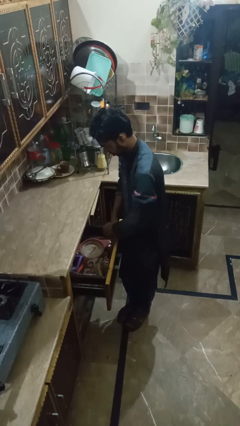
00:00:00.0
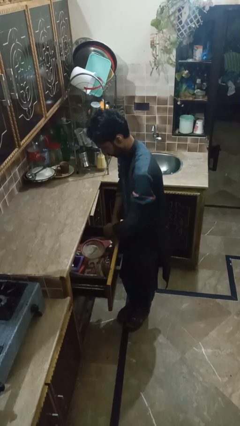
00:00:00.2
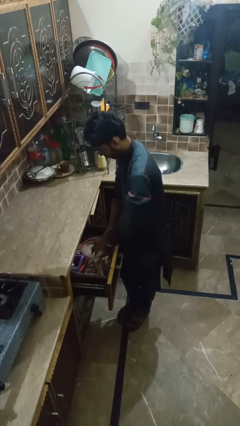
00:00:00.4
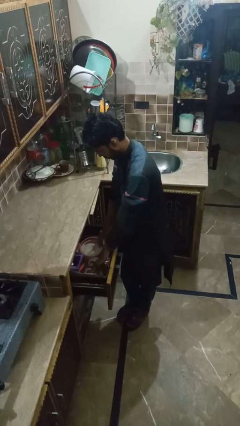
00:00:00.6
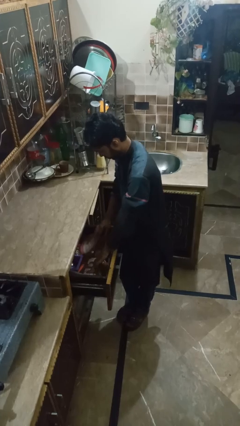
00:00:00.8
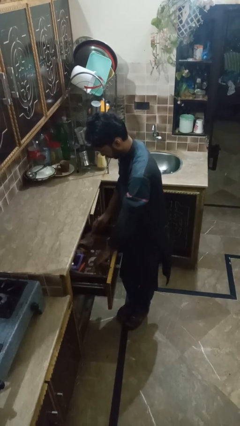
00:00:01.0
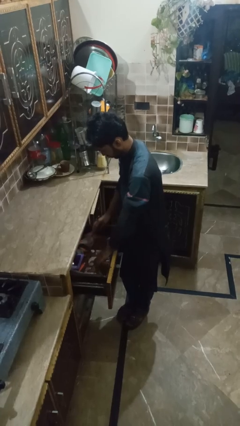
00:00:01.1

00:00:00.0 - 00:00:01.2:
person searches in kitchen drawer

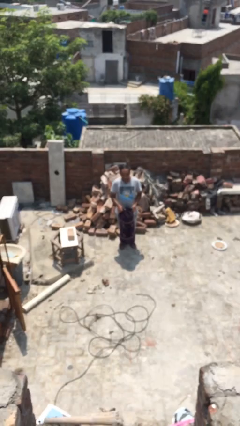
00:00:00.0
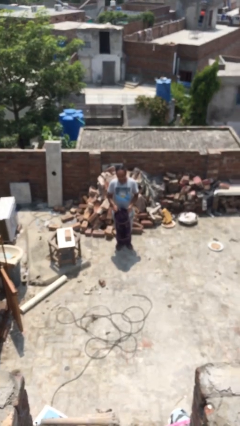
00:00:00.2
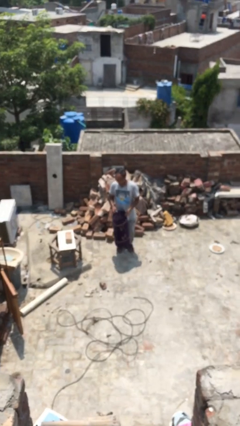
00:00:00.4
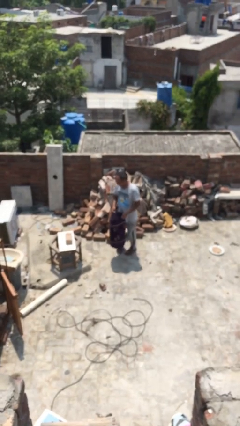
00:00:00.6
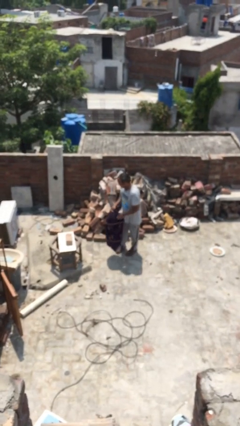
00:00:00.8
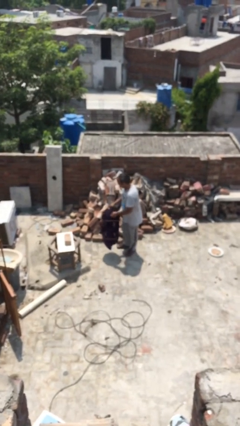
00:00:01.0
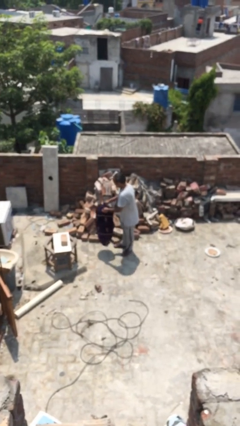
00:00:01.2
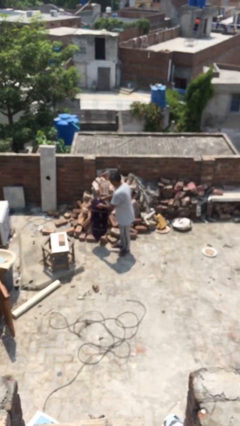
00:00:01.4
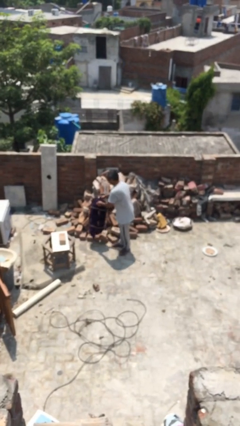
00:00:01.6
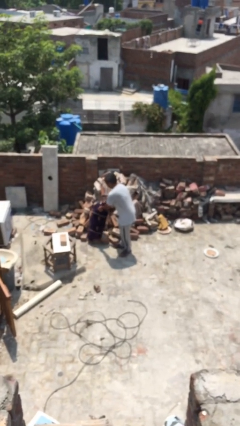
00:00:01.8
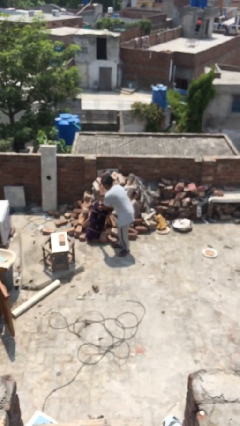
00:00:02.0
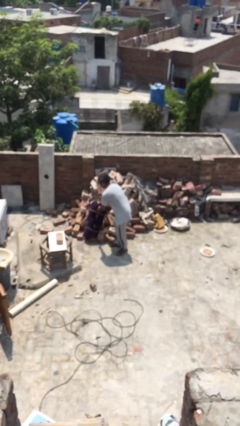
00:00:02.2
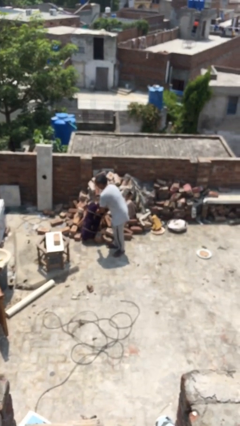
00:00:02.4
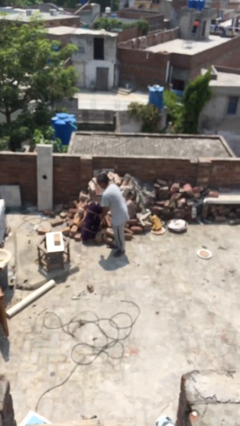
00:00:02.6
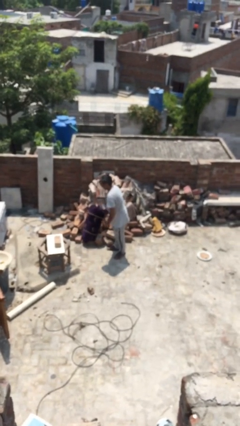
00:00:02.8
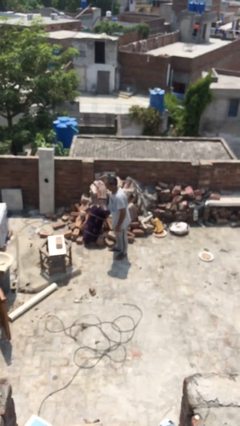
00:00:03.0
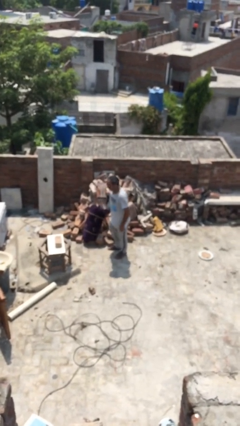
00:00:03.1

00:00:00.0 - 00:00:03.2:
person puts down object on floor

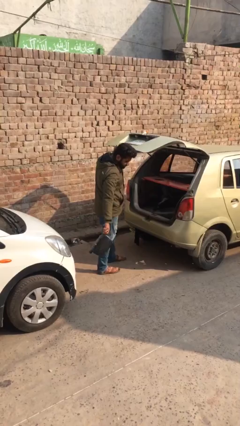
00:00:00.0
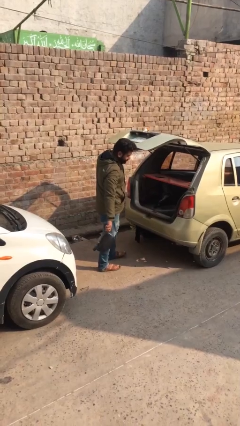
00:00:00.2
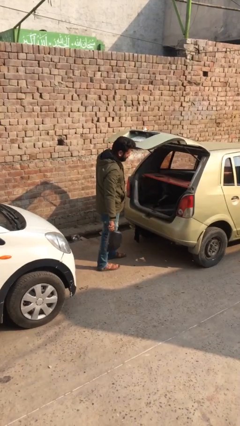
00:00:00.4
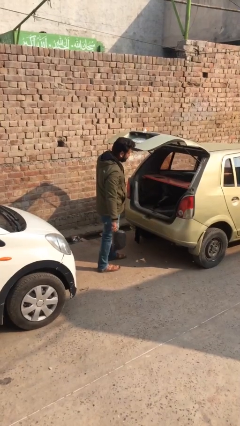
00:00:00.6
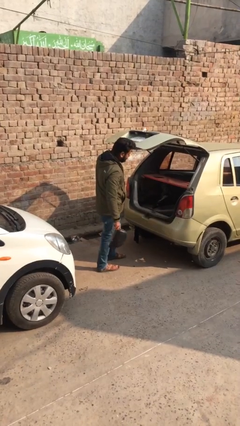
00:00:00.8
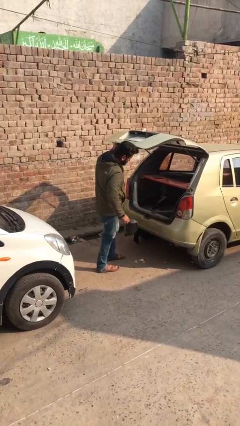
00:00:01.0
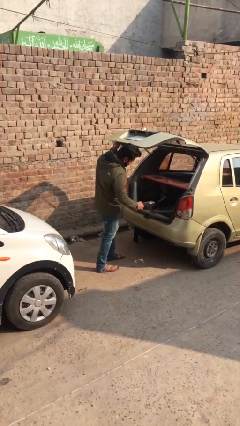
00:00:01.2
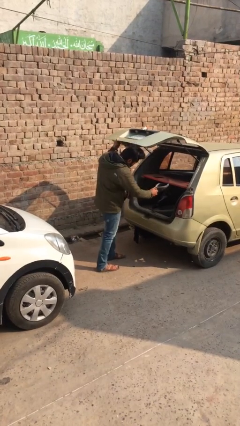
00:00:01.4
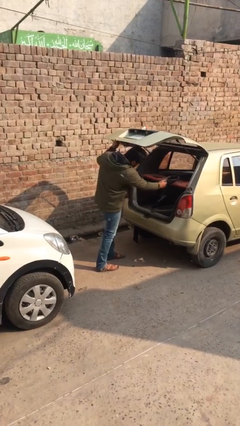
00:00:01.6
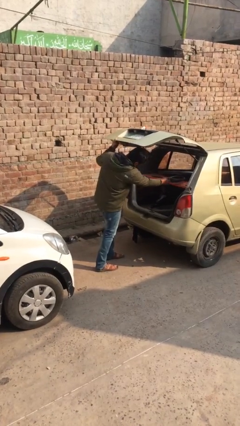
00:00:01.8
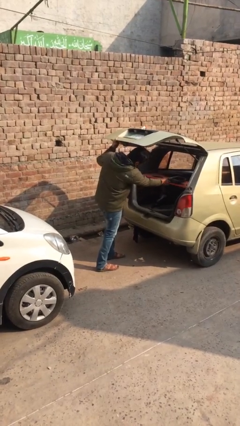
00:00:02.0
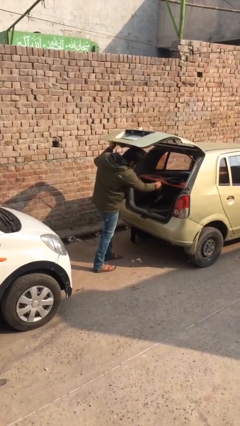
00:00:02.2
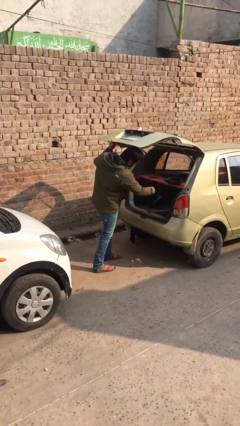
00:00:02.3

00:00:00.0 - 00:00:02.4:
person loads car

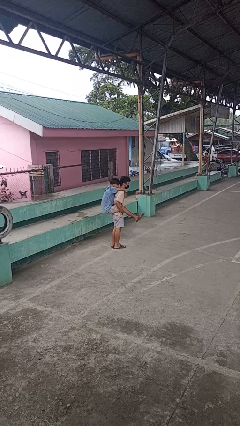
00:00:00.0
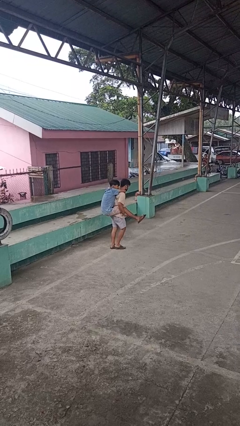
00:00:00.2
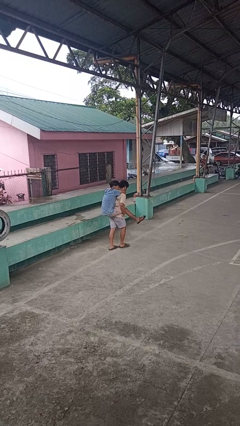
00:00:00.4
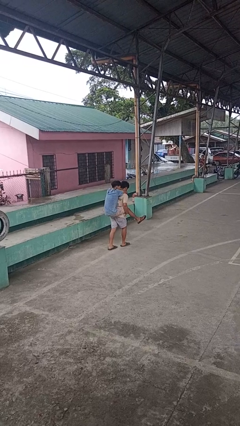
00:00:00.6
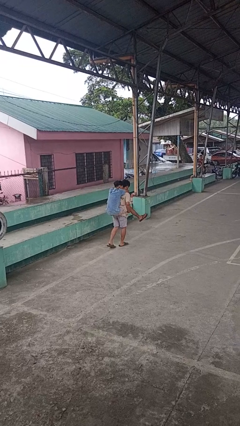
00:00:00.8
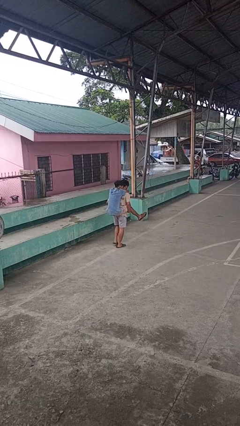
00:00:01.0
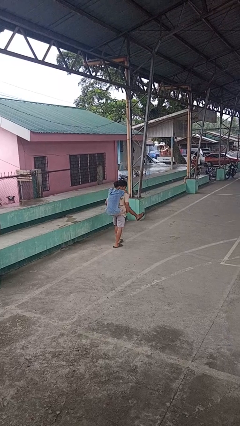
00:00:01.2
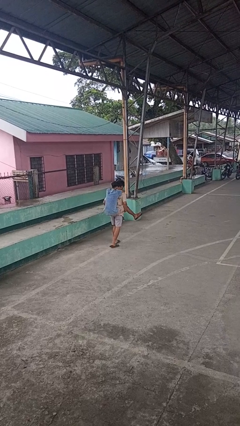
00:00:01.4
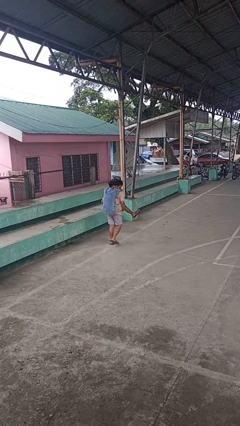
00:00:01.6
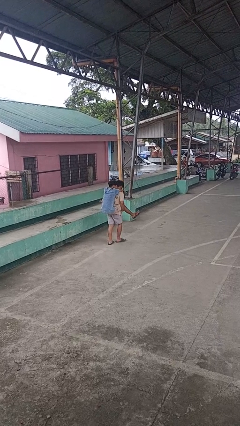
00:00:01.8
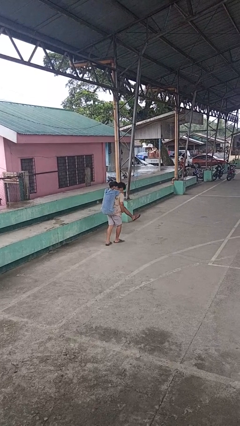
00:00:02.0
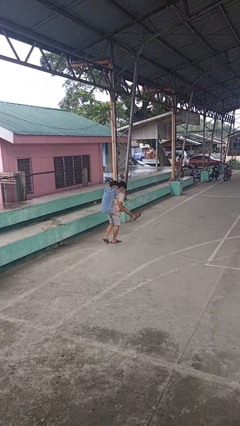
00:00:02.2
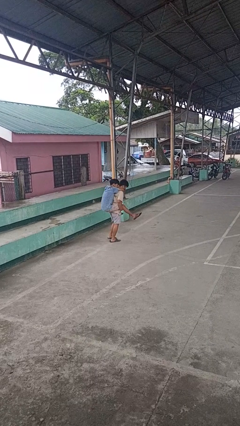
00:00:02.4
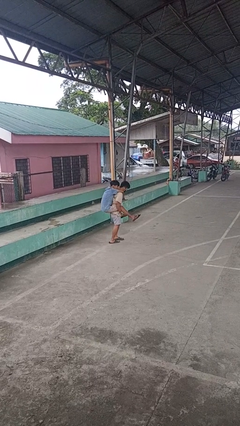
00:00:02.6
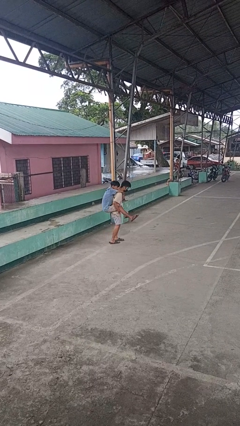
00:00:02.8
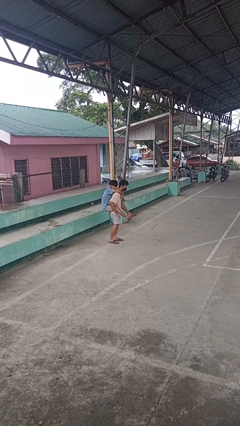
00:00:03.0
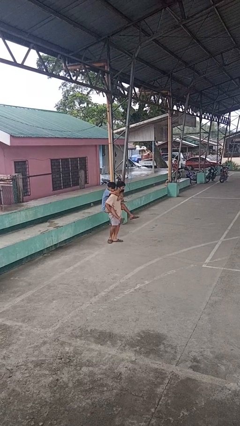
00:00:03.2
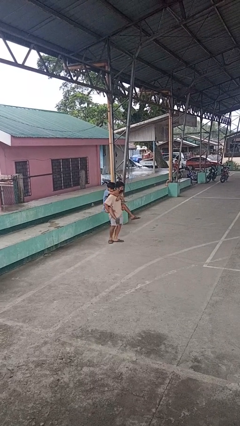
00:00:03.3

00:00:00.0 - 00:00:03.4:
person carries person on back

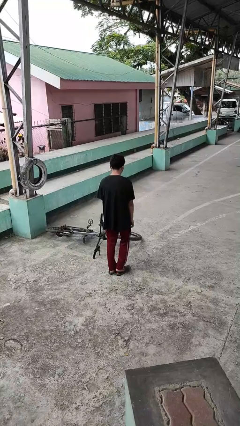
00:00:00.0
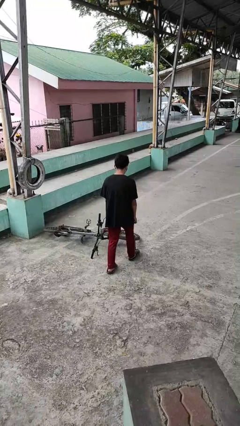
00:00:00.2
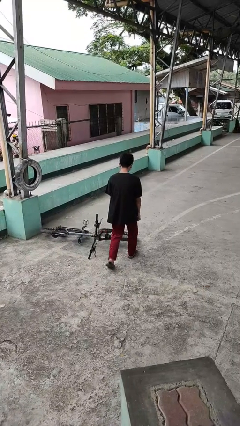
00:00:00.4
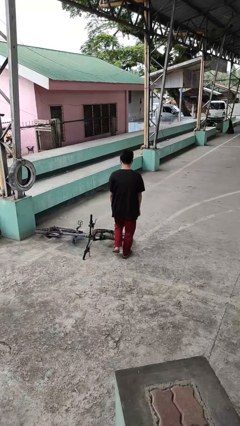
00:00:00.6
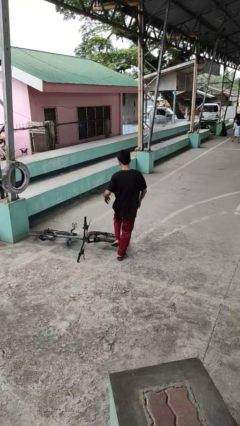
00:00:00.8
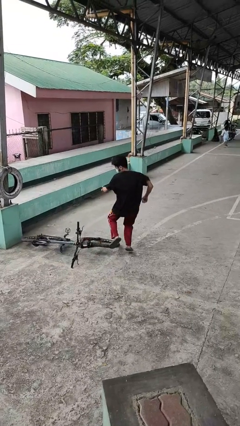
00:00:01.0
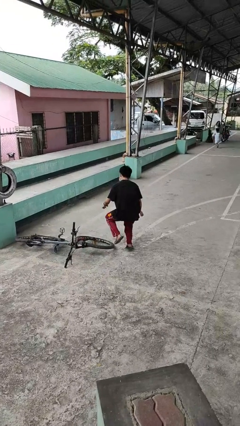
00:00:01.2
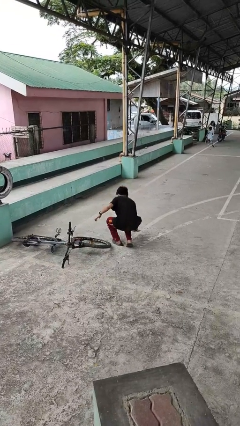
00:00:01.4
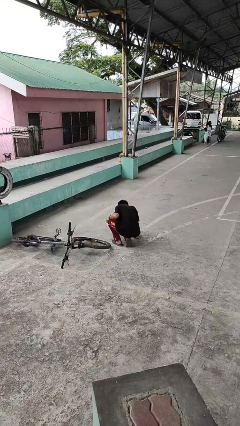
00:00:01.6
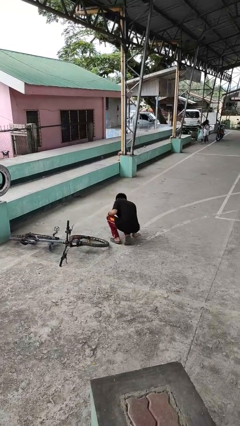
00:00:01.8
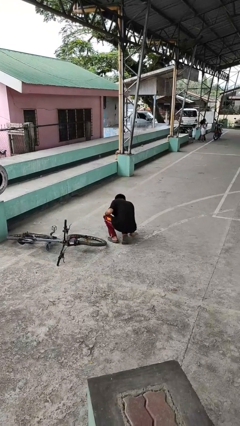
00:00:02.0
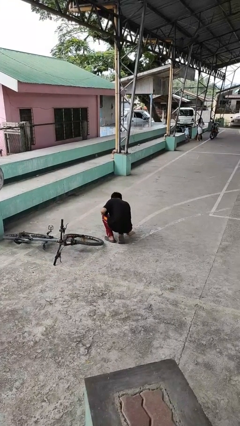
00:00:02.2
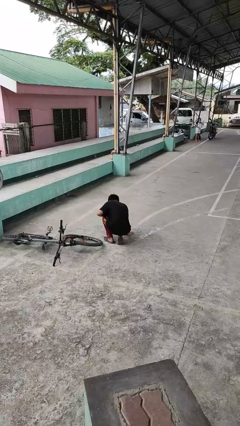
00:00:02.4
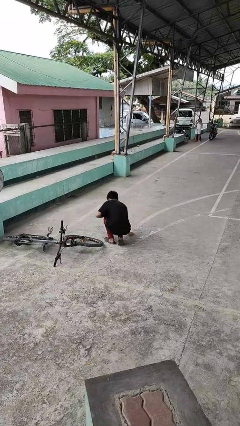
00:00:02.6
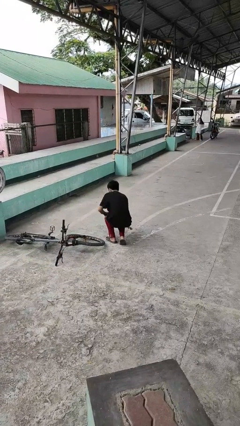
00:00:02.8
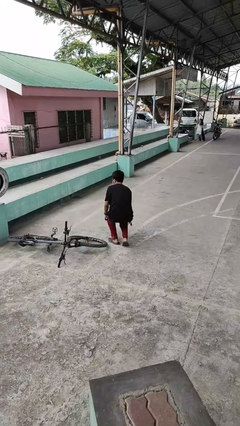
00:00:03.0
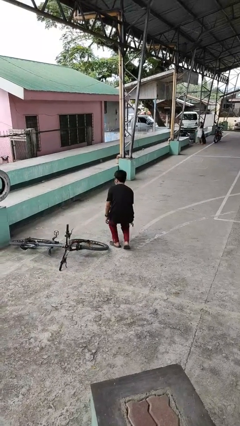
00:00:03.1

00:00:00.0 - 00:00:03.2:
person trips on object on floor

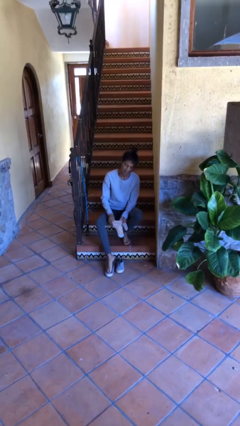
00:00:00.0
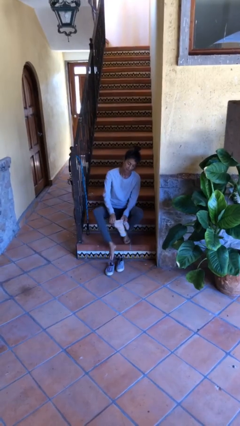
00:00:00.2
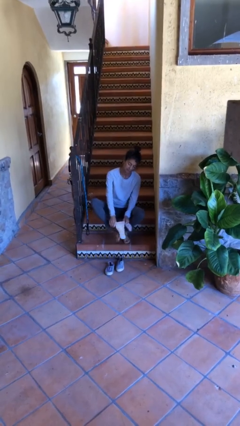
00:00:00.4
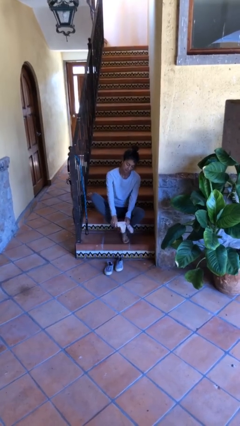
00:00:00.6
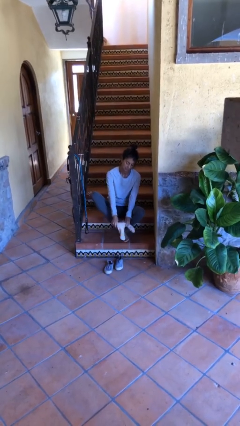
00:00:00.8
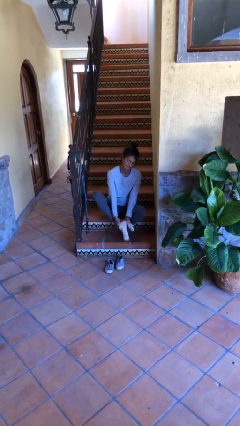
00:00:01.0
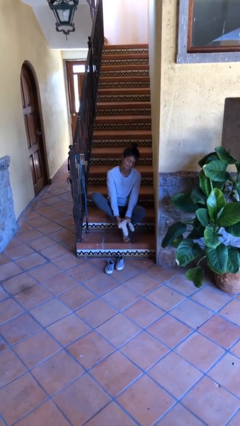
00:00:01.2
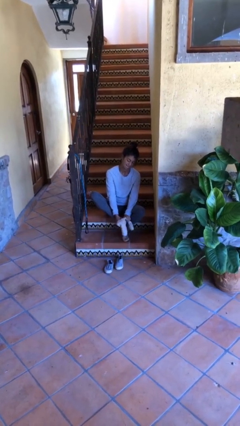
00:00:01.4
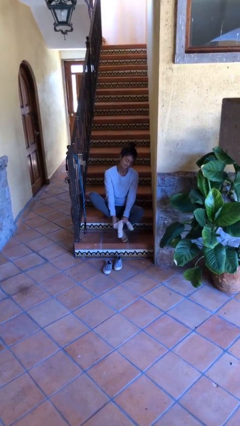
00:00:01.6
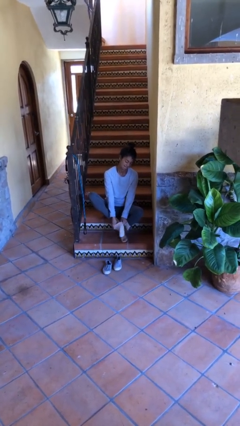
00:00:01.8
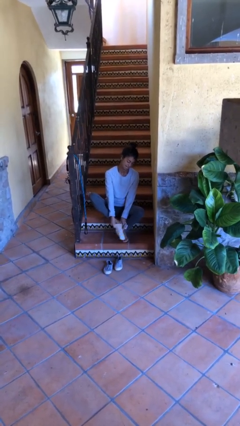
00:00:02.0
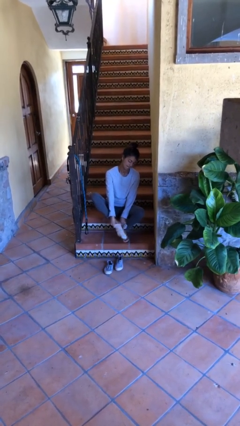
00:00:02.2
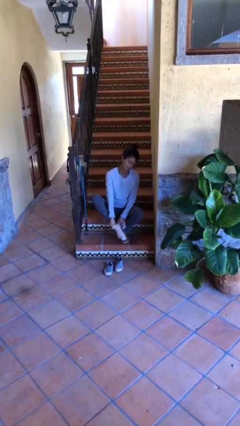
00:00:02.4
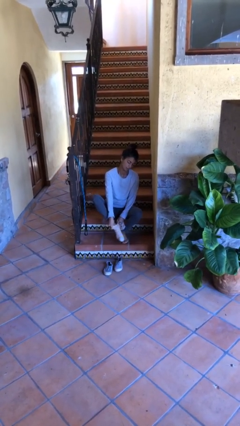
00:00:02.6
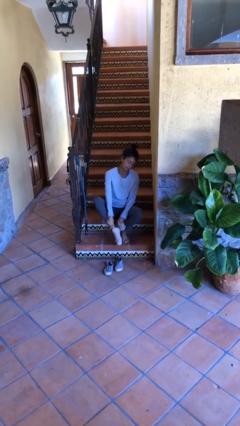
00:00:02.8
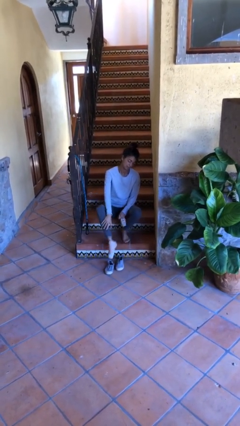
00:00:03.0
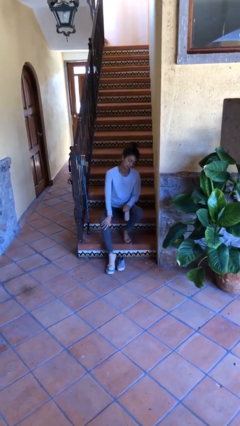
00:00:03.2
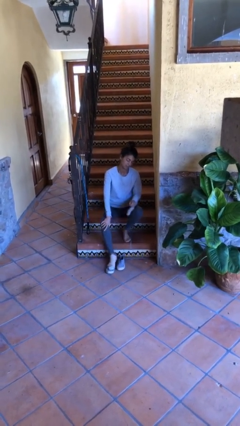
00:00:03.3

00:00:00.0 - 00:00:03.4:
person puts on socks

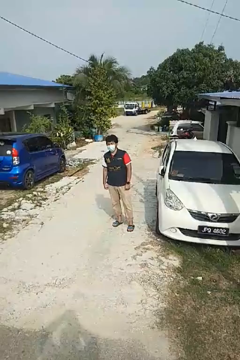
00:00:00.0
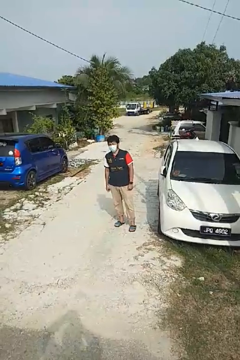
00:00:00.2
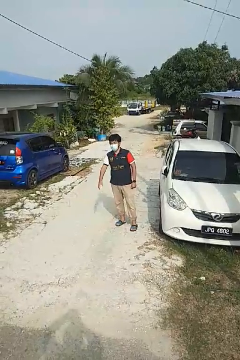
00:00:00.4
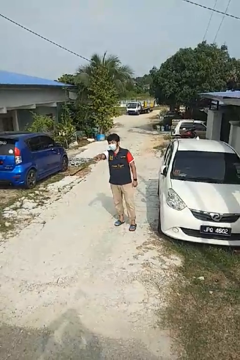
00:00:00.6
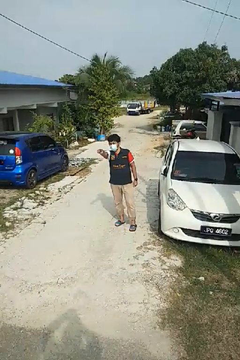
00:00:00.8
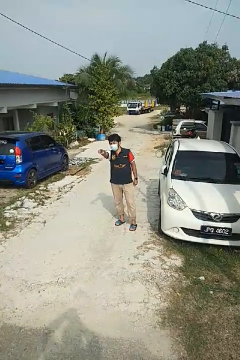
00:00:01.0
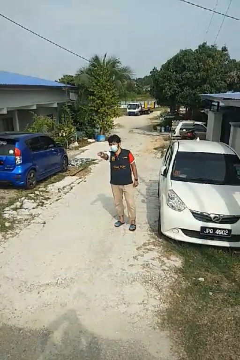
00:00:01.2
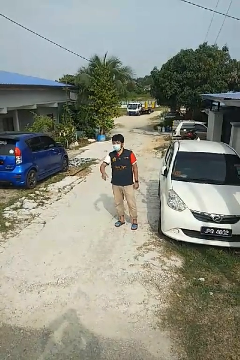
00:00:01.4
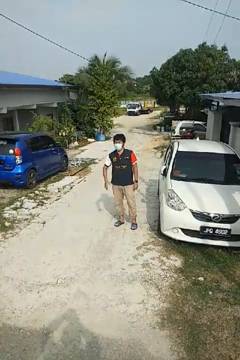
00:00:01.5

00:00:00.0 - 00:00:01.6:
person points at person
